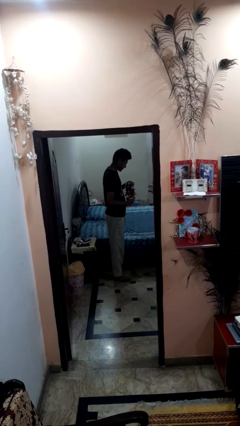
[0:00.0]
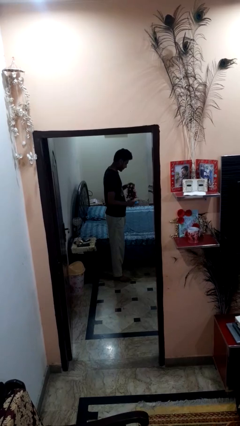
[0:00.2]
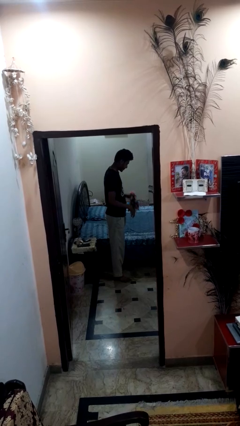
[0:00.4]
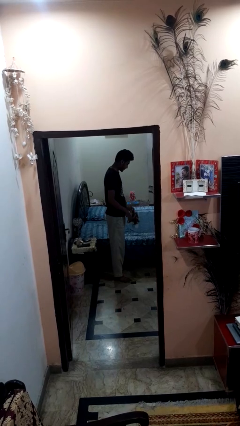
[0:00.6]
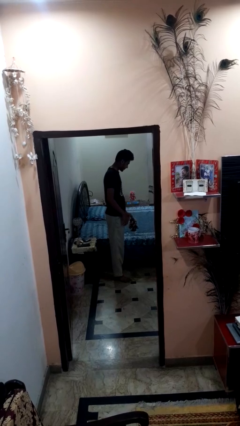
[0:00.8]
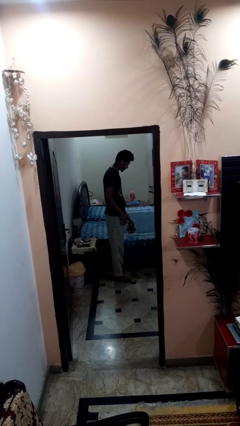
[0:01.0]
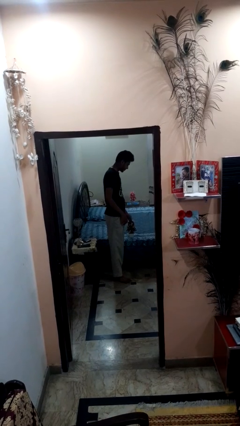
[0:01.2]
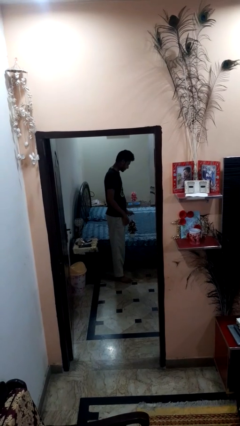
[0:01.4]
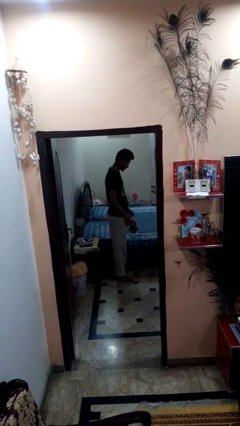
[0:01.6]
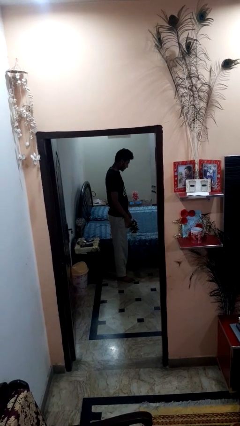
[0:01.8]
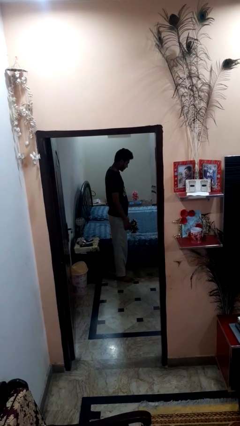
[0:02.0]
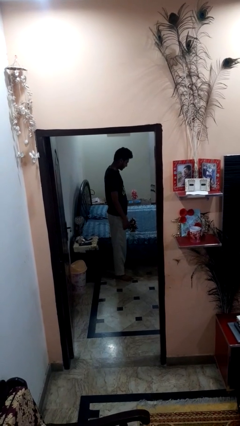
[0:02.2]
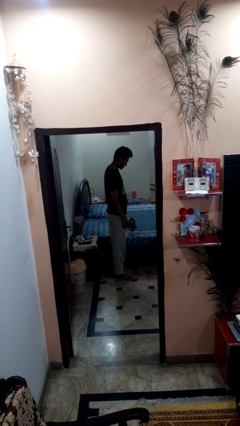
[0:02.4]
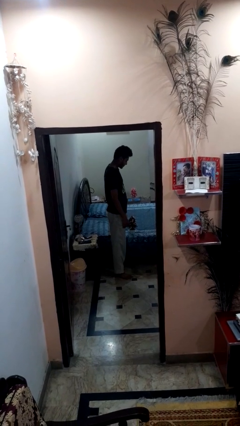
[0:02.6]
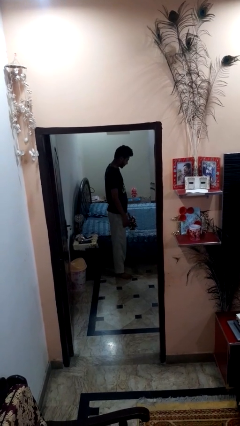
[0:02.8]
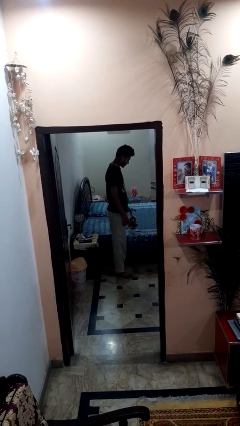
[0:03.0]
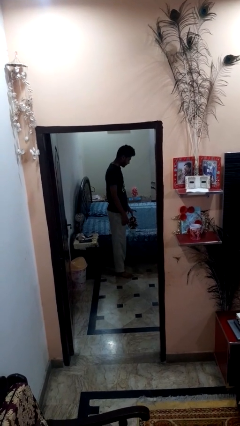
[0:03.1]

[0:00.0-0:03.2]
person puts down object on bed

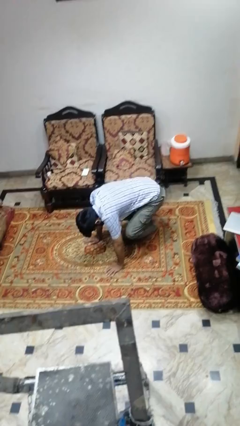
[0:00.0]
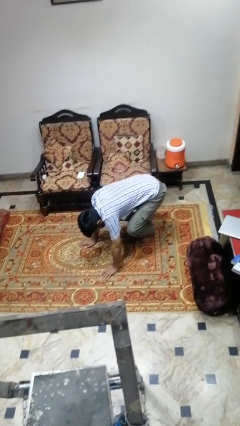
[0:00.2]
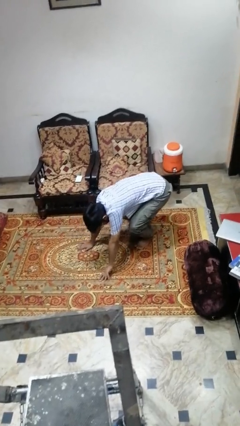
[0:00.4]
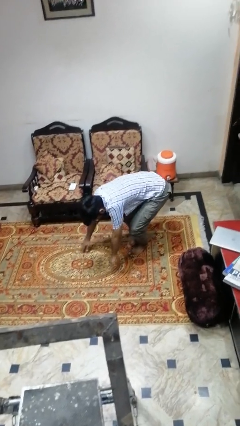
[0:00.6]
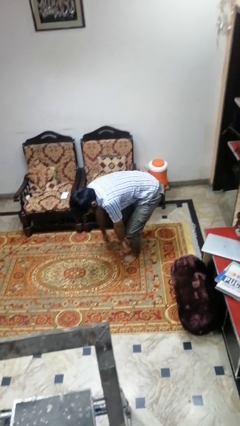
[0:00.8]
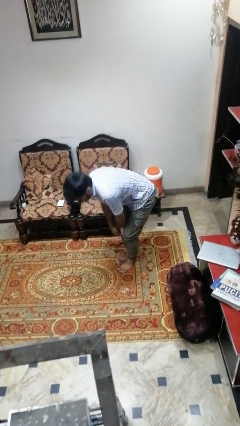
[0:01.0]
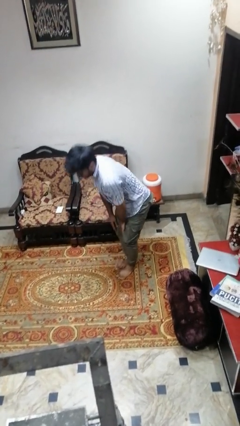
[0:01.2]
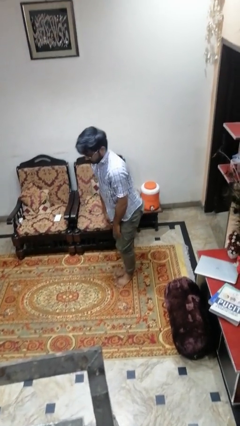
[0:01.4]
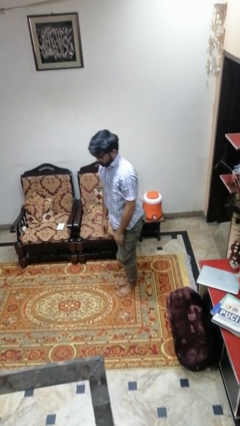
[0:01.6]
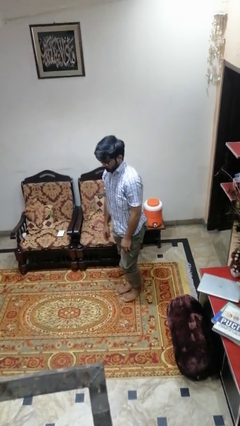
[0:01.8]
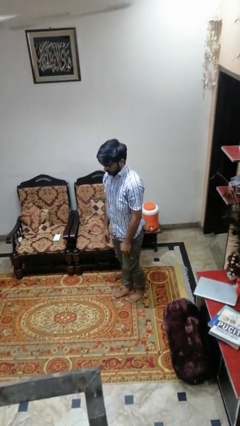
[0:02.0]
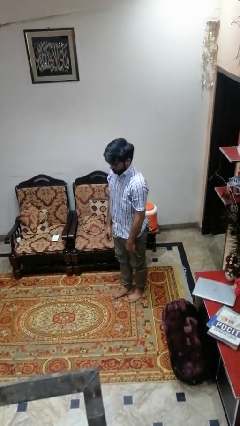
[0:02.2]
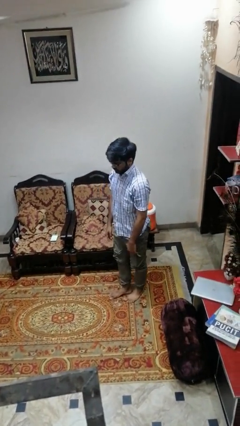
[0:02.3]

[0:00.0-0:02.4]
person stands up from floor

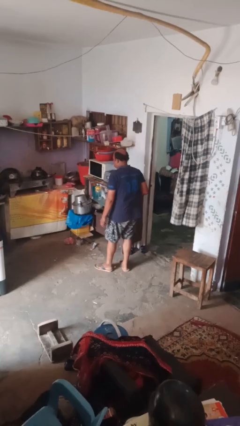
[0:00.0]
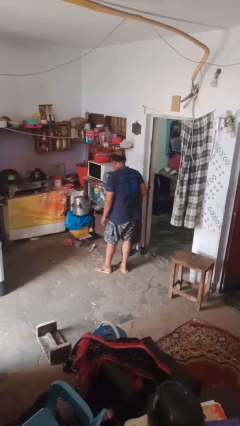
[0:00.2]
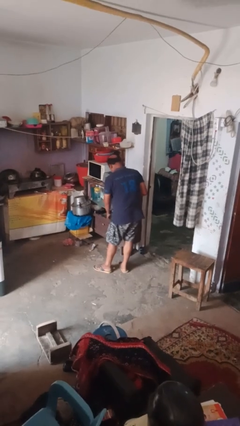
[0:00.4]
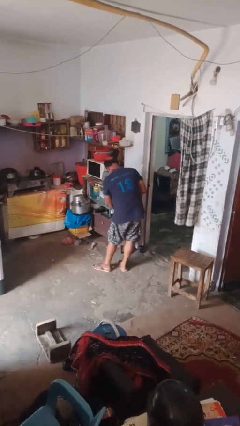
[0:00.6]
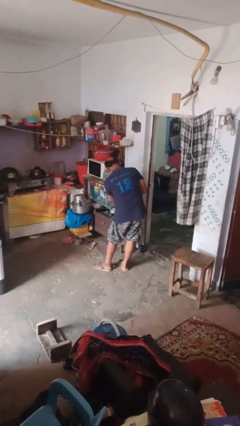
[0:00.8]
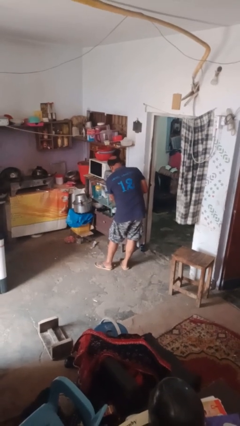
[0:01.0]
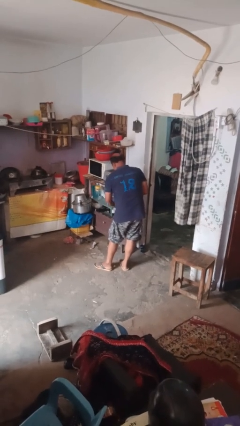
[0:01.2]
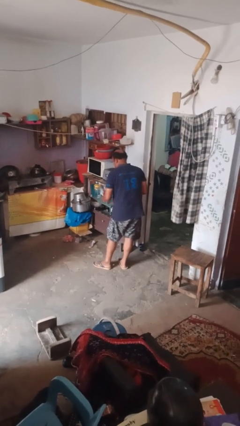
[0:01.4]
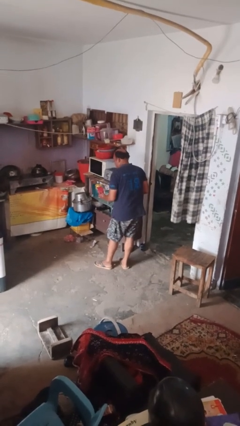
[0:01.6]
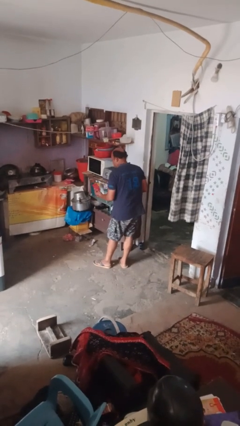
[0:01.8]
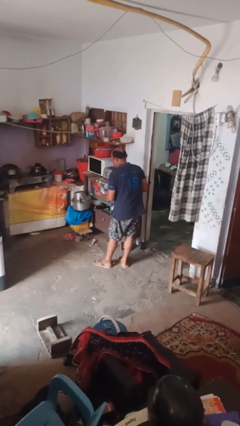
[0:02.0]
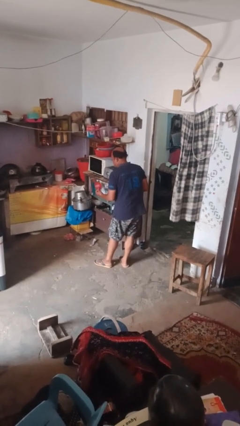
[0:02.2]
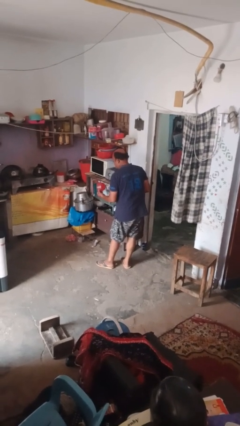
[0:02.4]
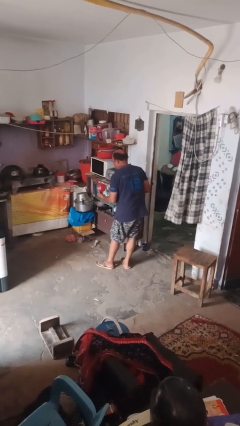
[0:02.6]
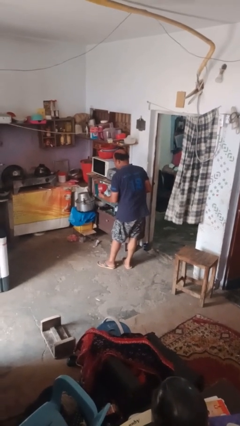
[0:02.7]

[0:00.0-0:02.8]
person takes object from kitchen drawer

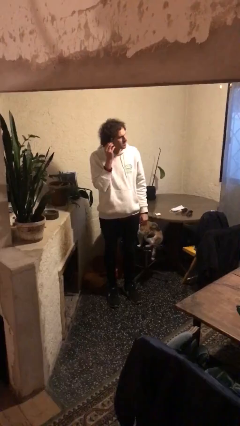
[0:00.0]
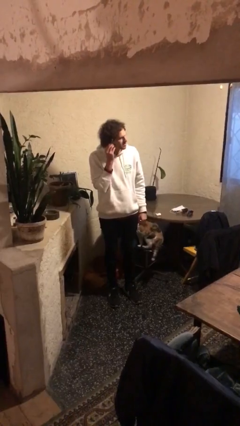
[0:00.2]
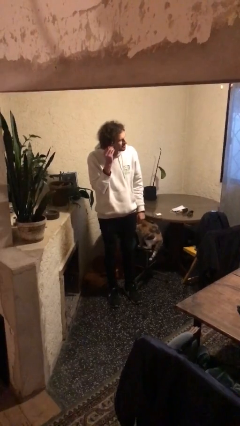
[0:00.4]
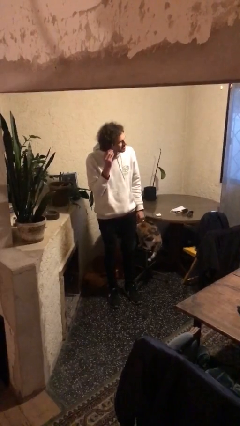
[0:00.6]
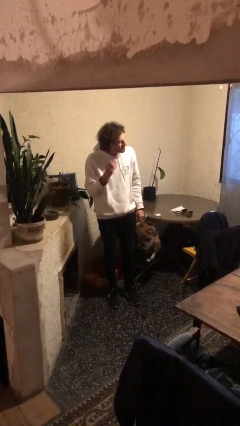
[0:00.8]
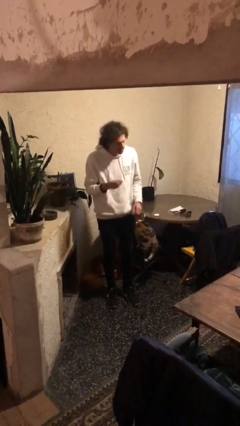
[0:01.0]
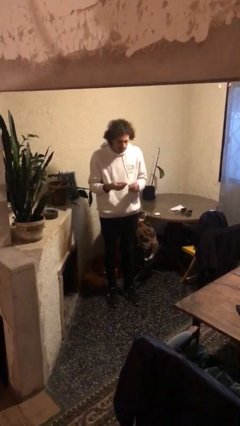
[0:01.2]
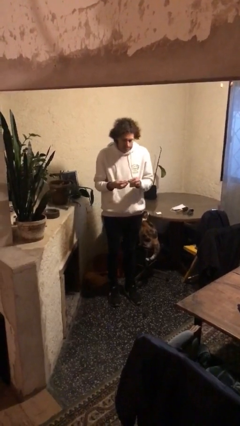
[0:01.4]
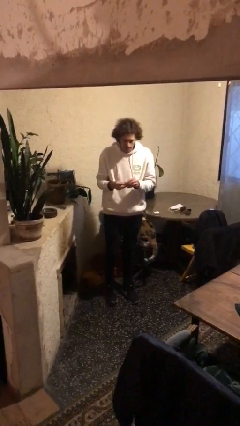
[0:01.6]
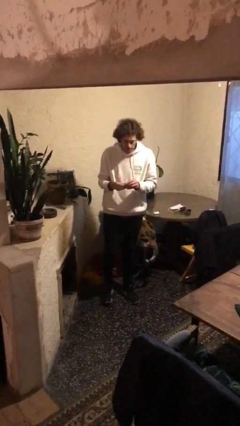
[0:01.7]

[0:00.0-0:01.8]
person takes off earrings

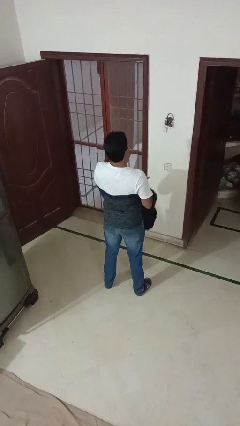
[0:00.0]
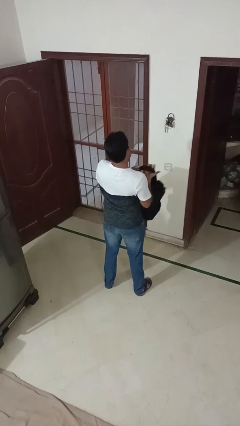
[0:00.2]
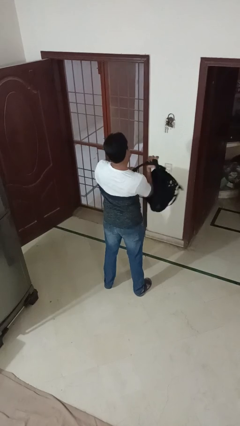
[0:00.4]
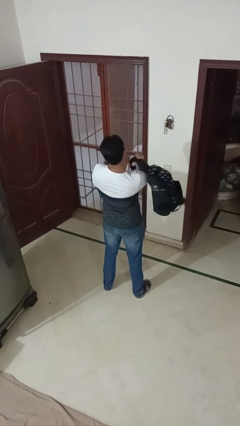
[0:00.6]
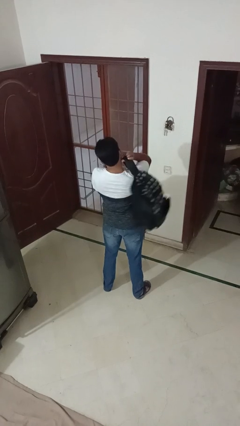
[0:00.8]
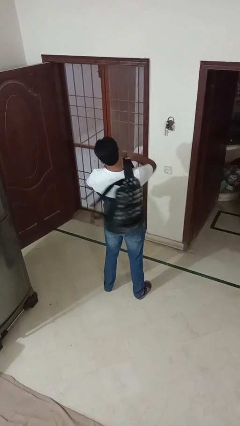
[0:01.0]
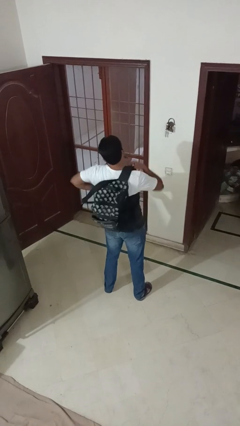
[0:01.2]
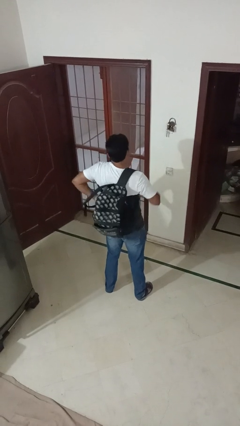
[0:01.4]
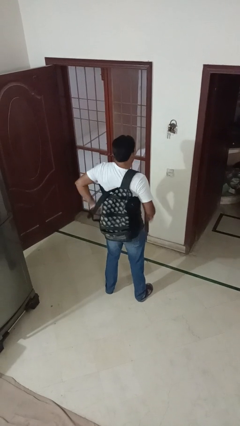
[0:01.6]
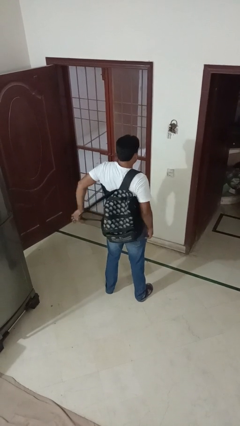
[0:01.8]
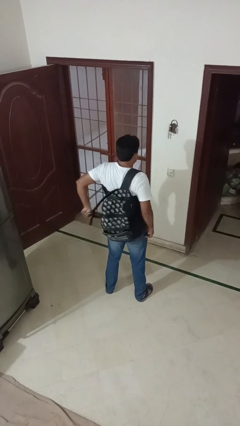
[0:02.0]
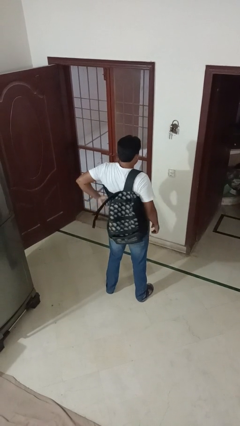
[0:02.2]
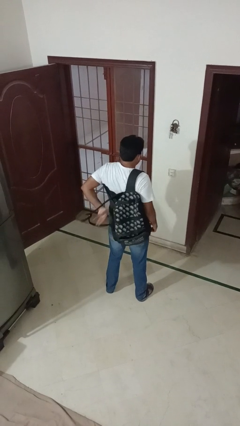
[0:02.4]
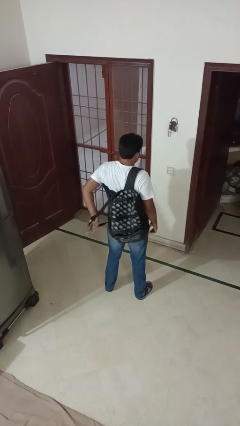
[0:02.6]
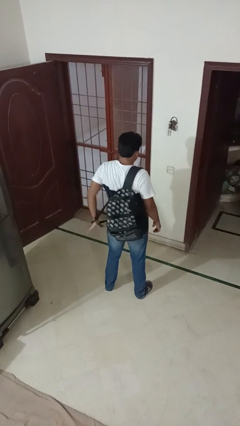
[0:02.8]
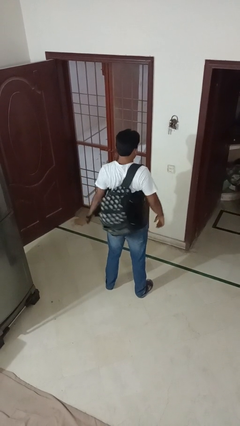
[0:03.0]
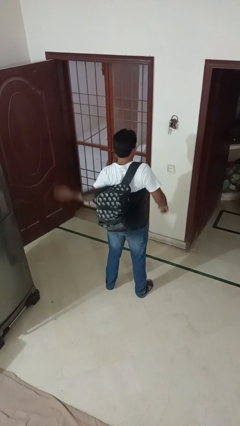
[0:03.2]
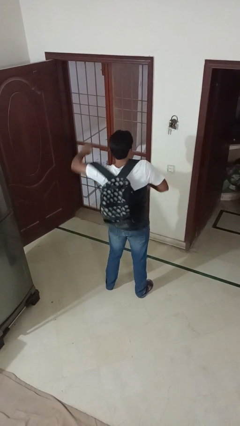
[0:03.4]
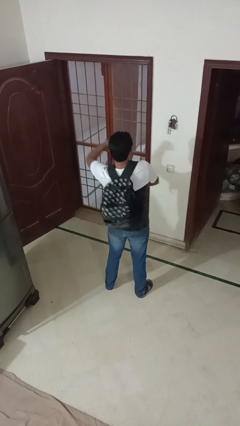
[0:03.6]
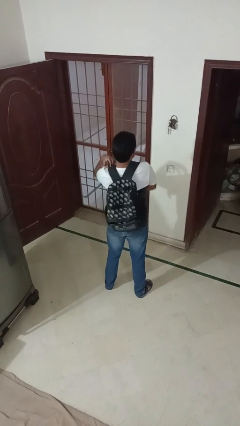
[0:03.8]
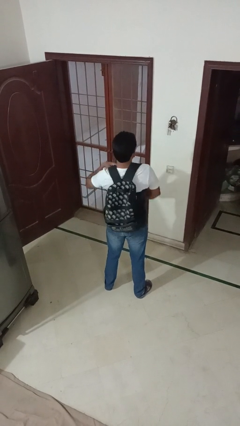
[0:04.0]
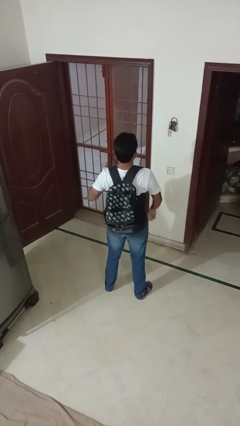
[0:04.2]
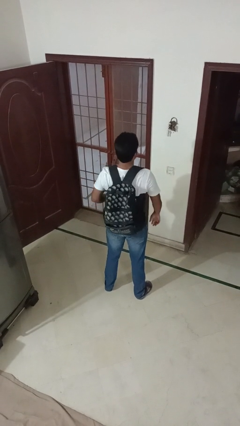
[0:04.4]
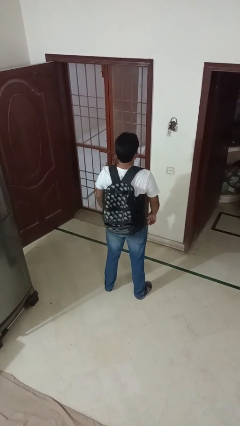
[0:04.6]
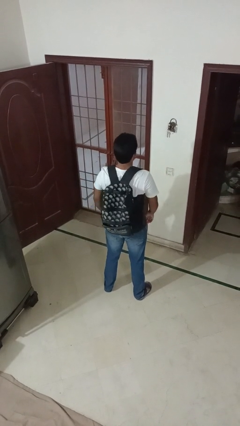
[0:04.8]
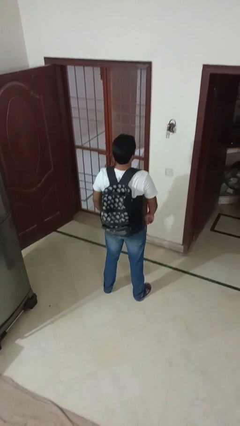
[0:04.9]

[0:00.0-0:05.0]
person puts on backpack

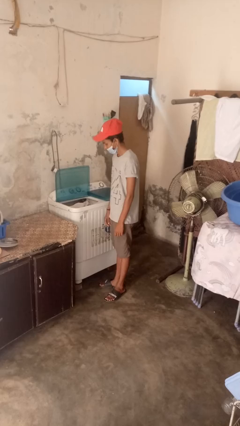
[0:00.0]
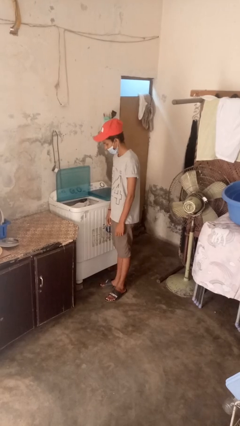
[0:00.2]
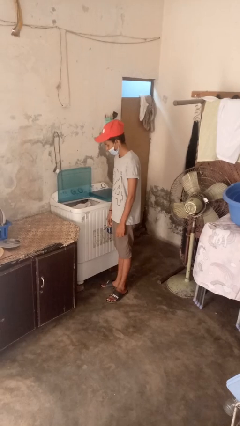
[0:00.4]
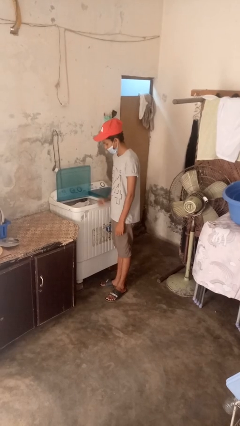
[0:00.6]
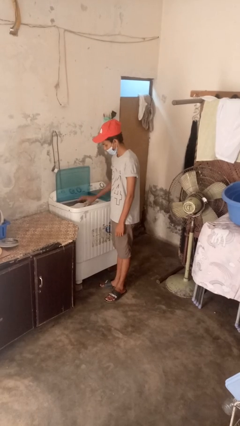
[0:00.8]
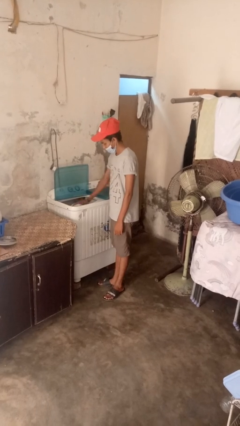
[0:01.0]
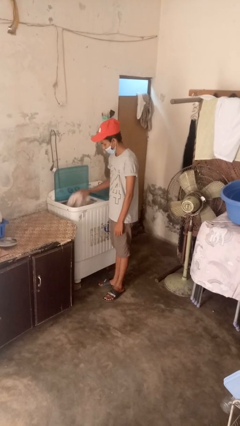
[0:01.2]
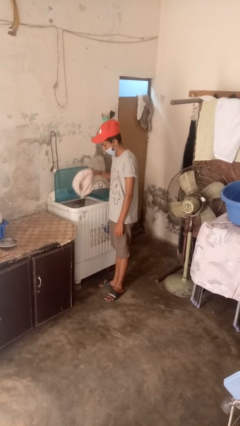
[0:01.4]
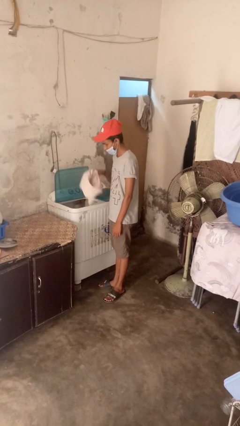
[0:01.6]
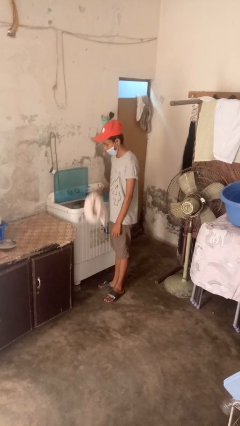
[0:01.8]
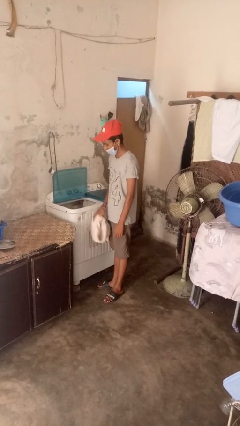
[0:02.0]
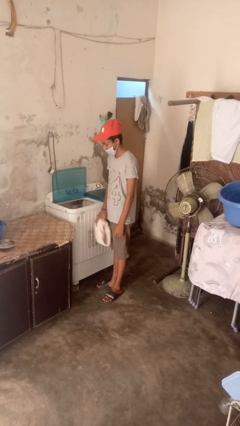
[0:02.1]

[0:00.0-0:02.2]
person unloads dryer
